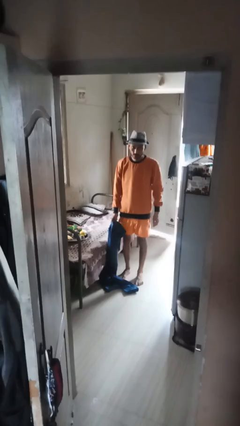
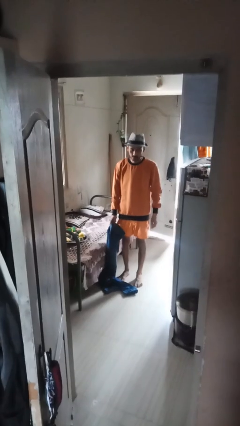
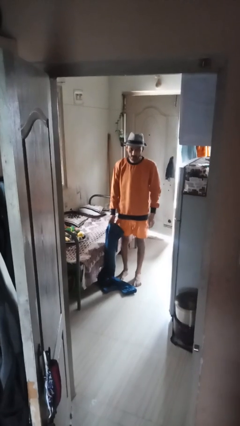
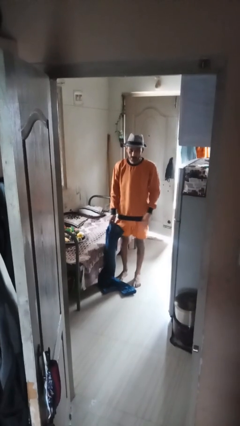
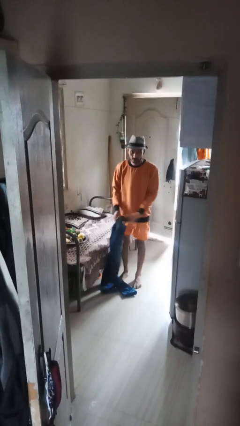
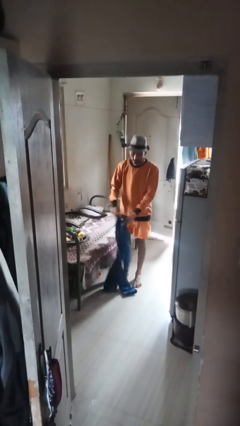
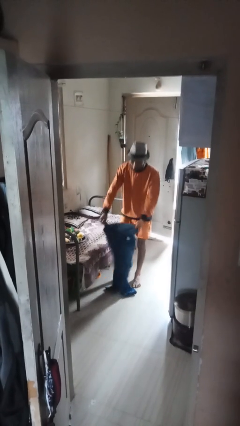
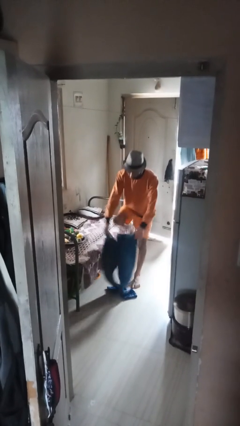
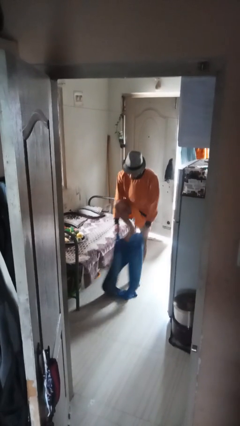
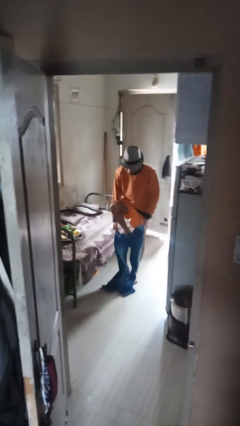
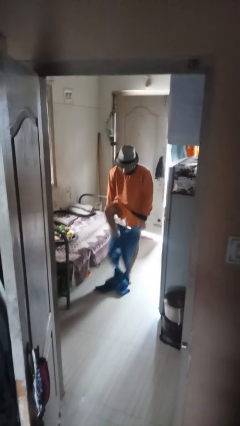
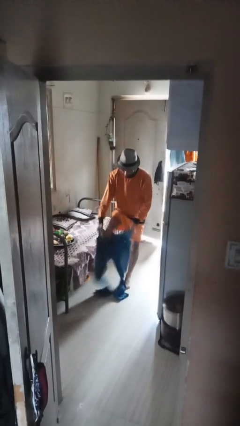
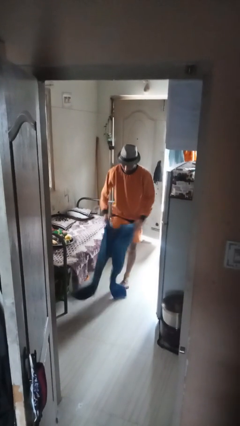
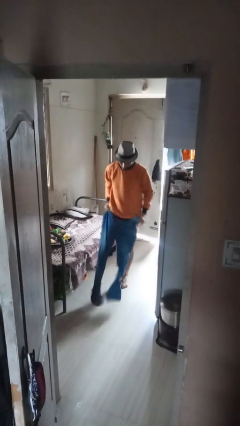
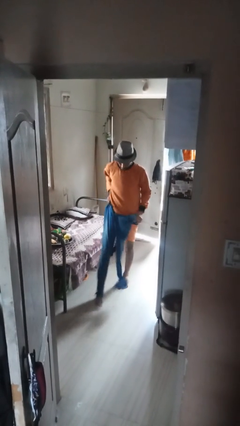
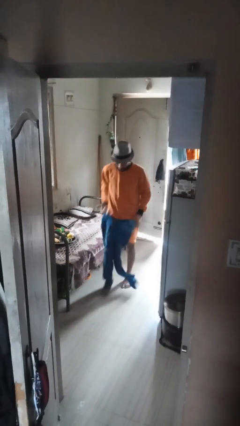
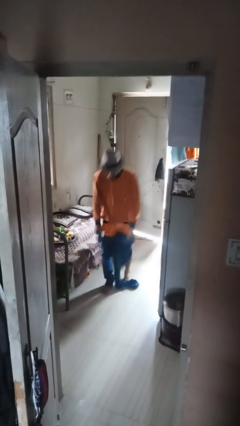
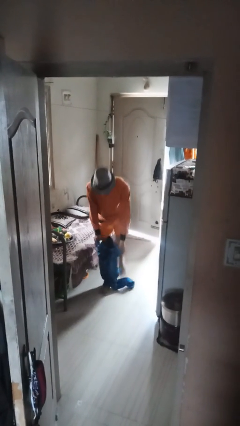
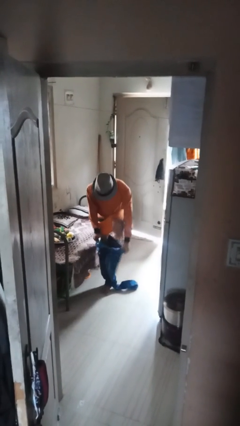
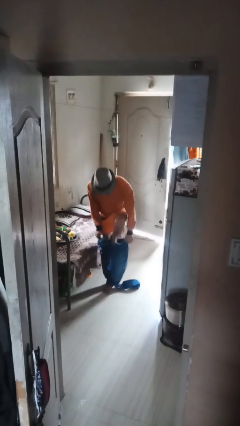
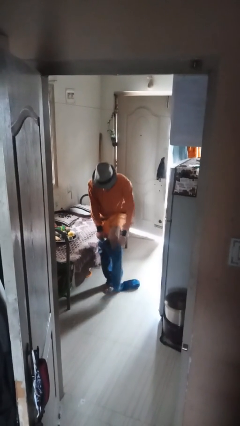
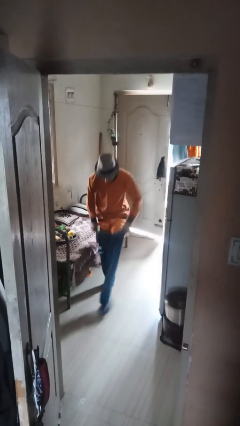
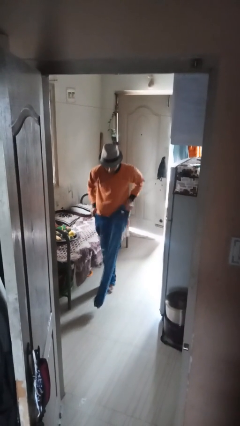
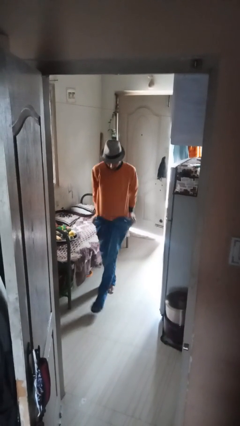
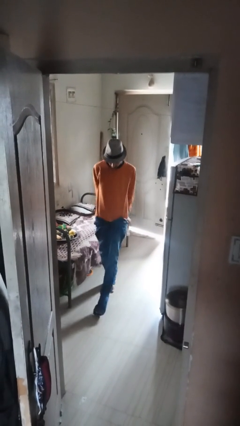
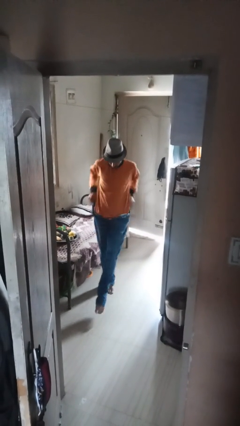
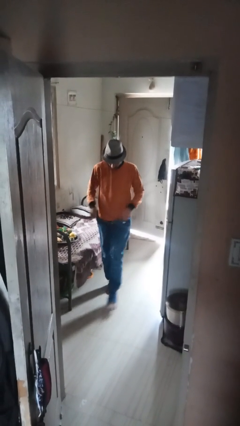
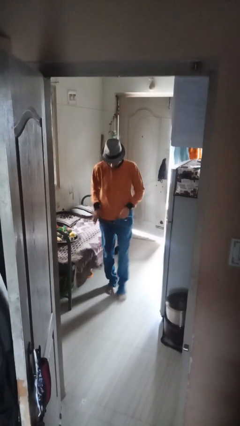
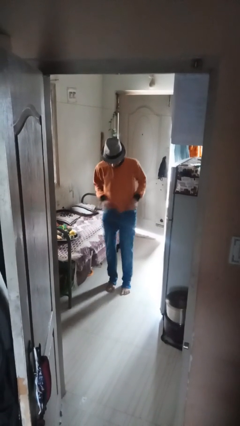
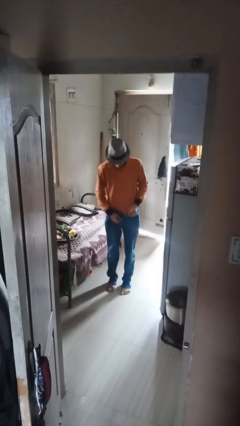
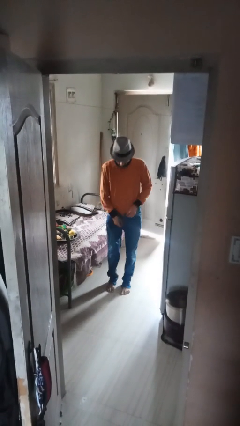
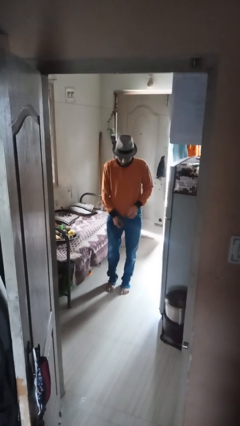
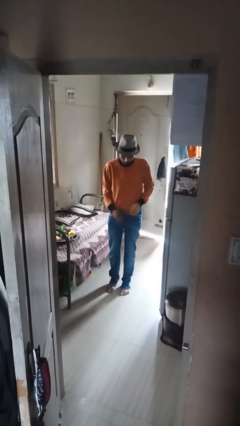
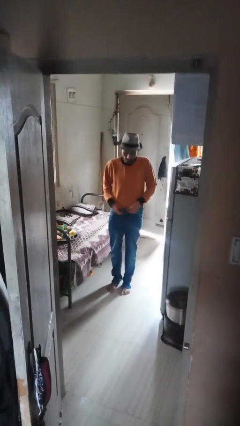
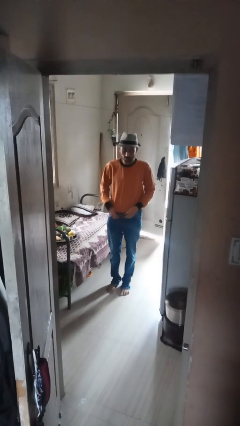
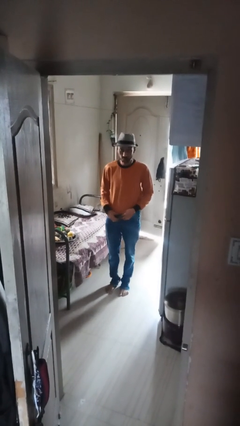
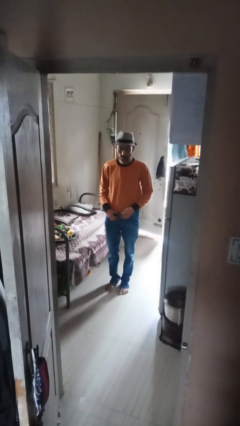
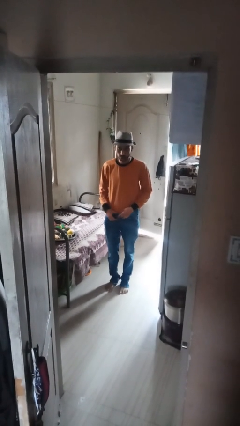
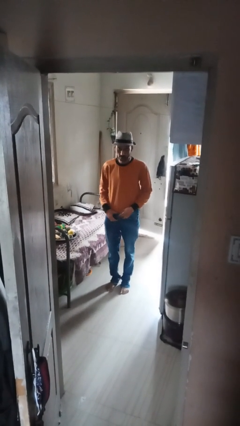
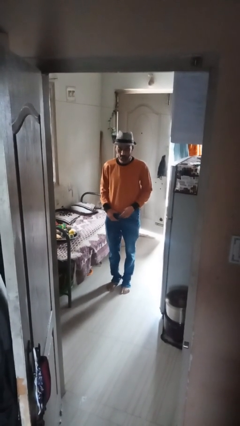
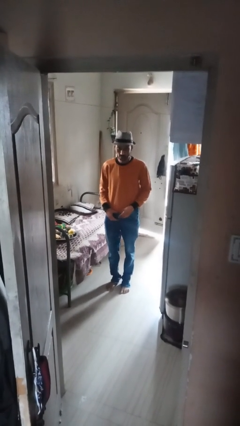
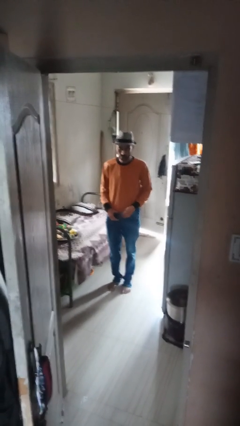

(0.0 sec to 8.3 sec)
person puts on pants

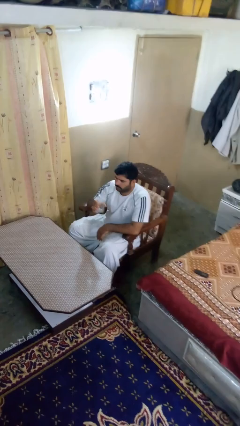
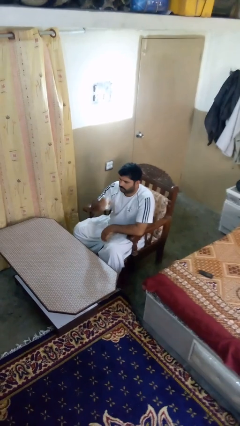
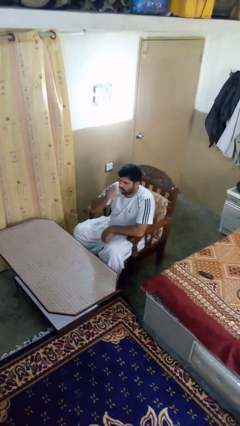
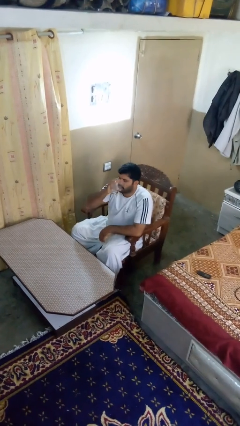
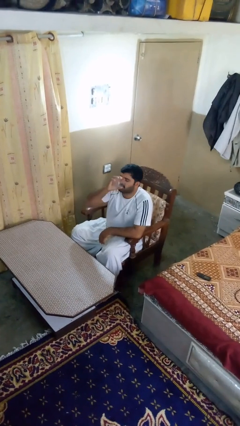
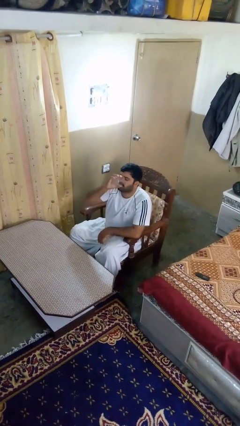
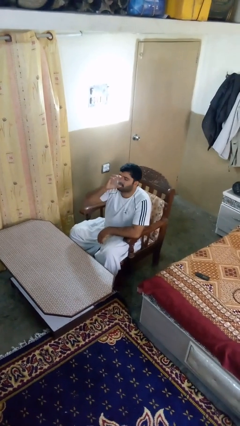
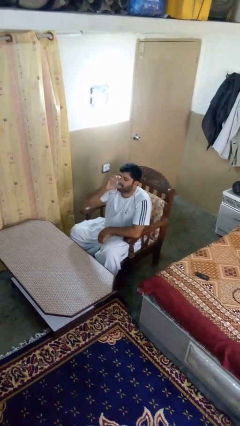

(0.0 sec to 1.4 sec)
person drinks from shotglass

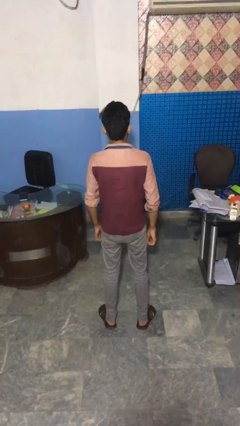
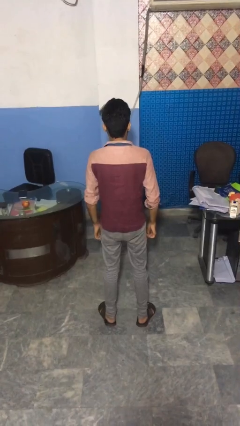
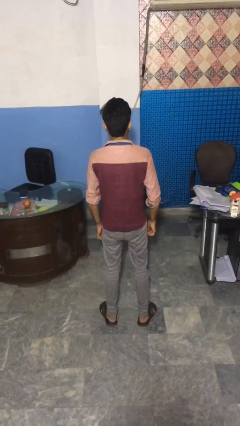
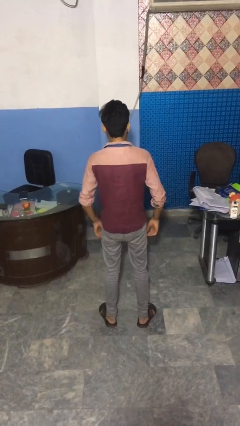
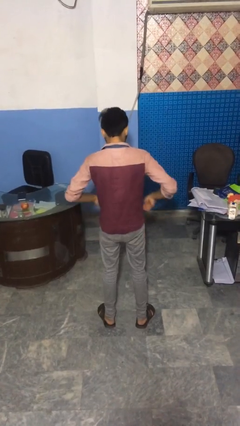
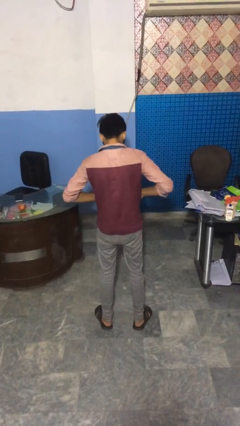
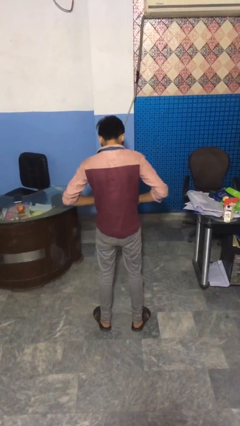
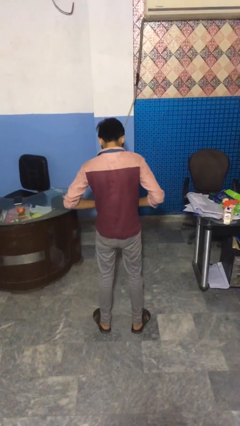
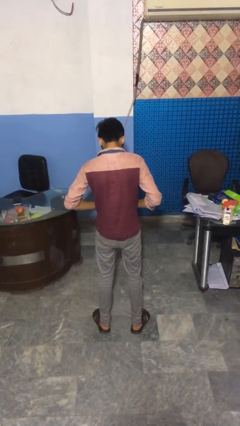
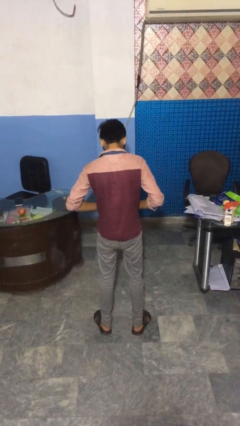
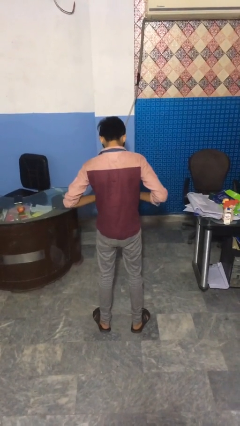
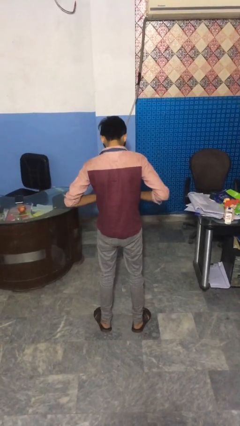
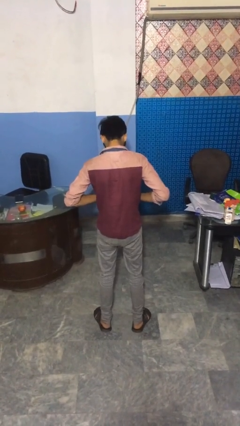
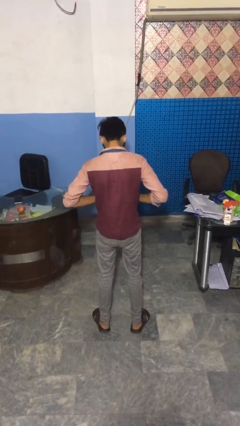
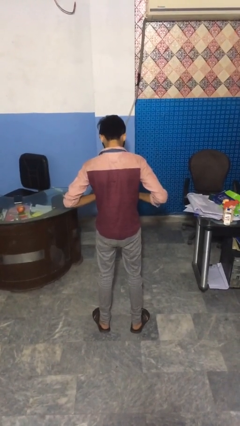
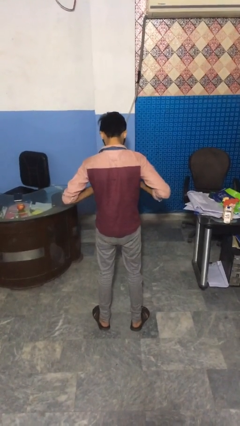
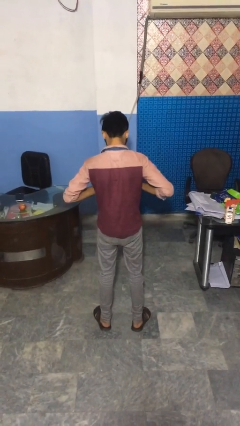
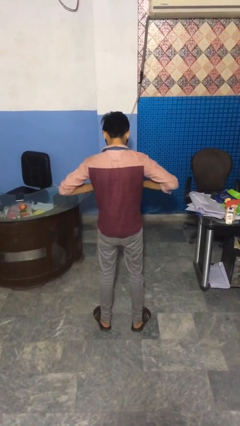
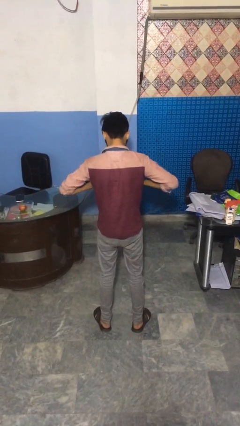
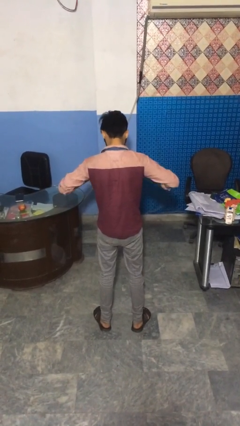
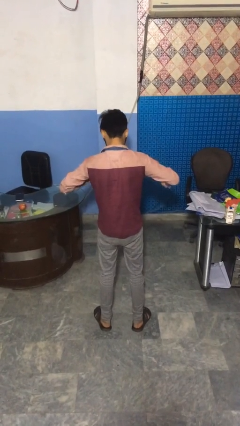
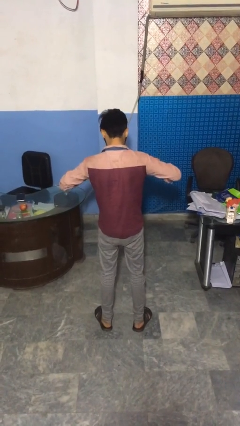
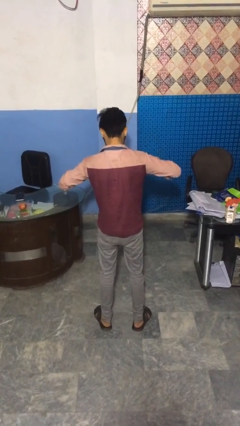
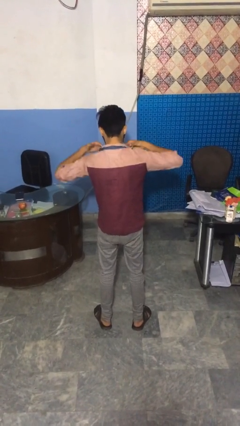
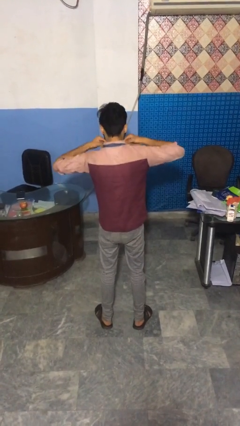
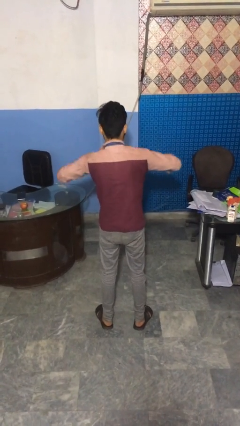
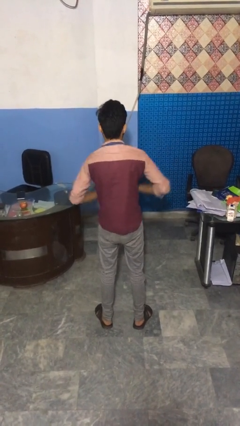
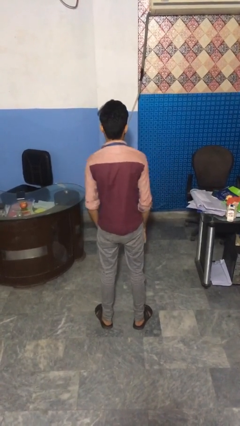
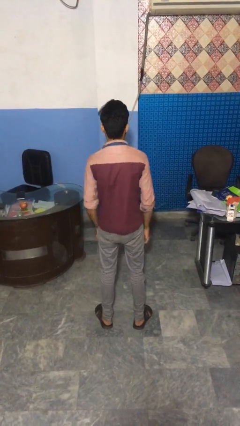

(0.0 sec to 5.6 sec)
person unbuttons shirt

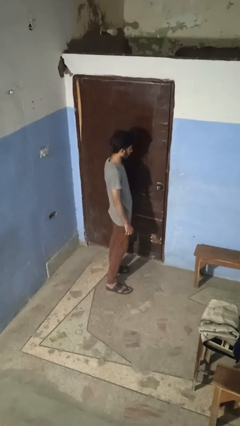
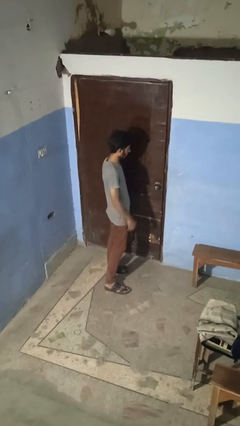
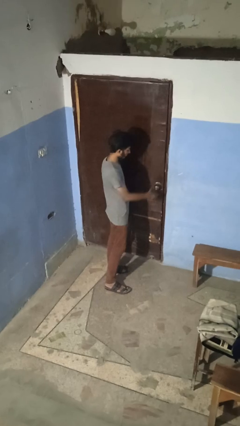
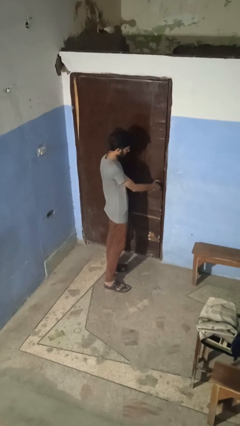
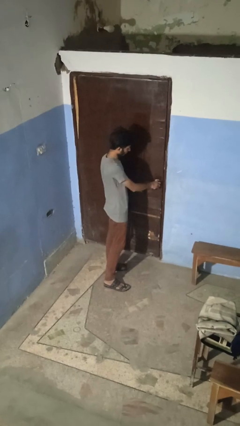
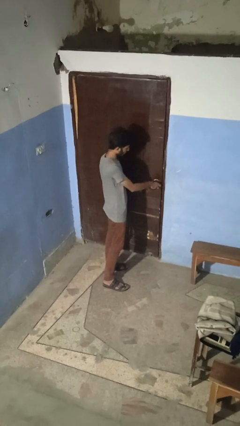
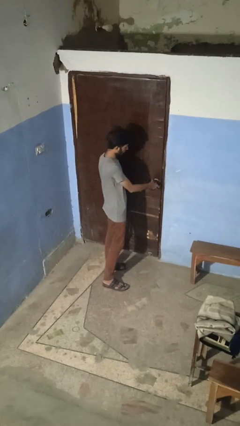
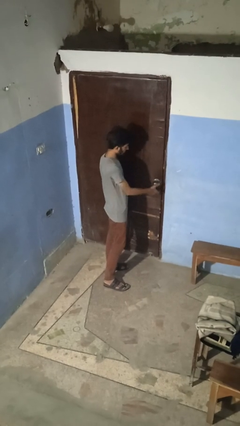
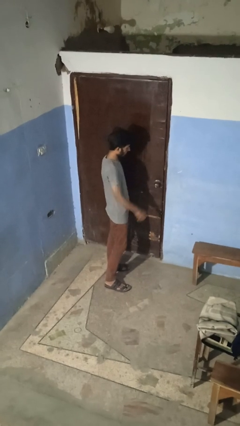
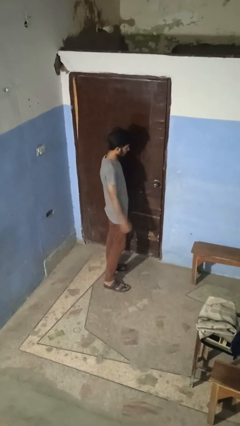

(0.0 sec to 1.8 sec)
person unlocks door with keys

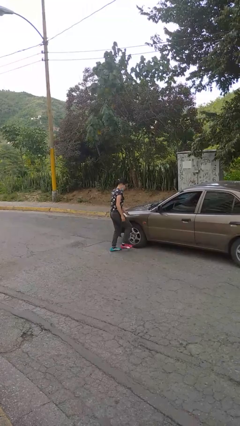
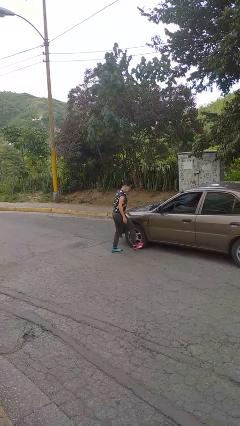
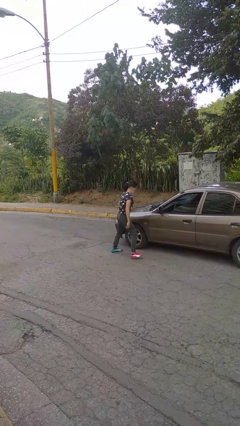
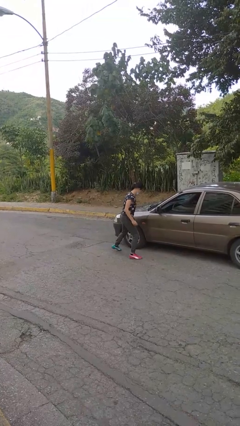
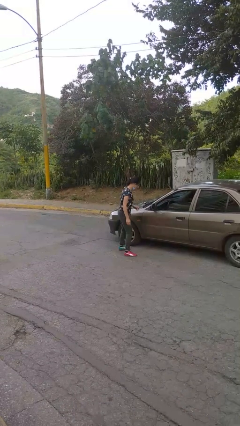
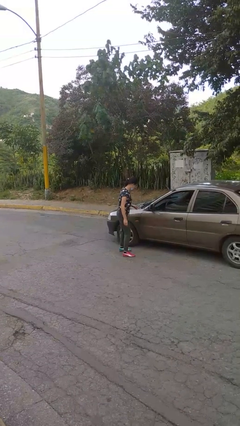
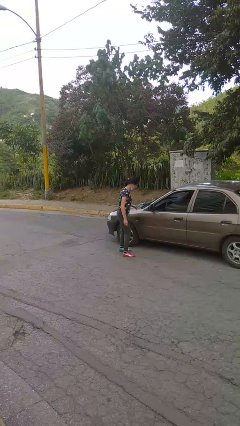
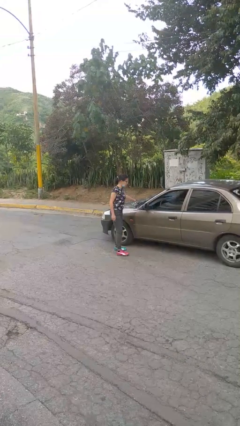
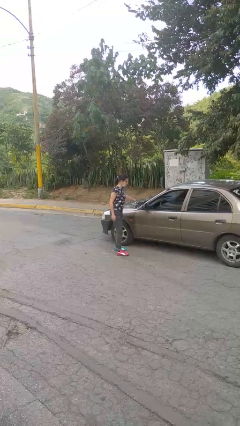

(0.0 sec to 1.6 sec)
person kicks car tires
